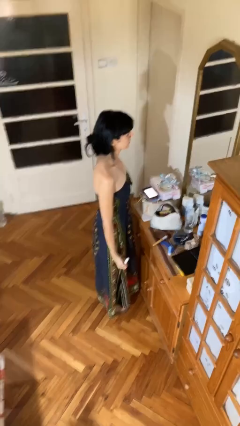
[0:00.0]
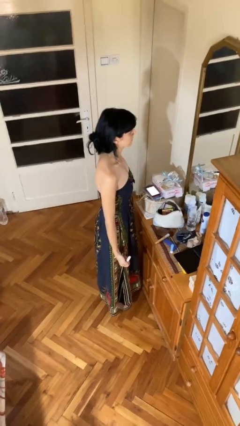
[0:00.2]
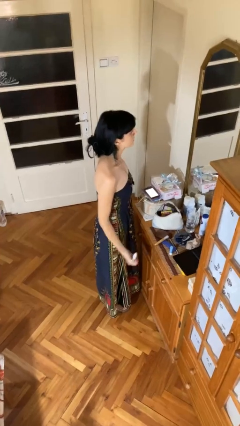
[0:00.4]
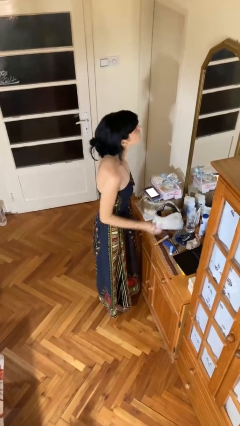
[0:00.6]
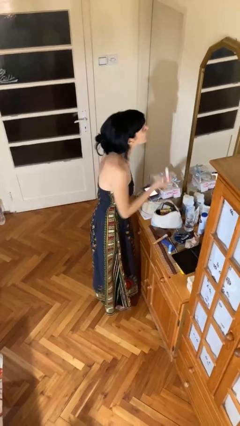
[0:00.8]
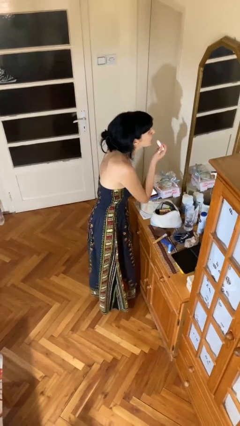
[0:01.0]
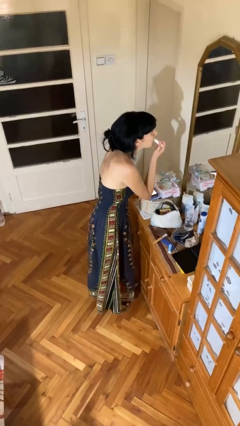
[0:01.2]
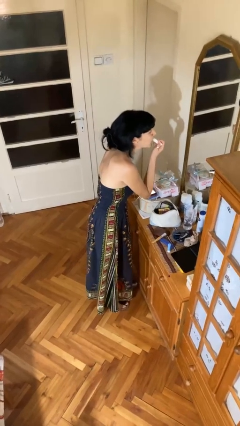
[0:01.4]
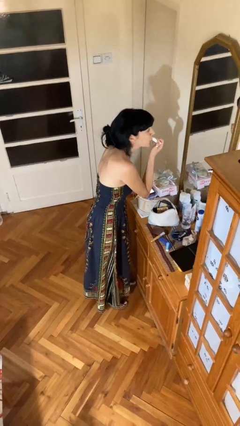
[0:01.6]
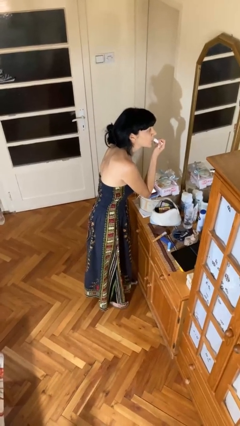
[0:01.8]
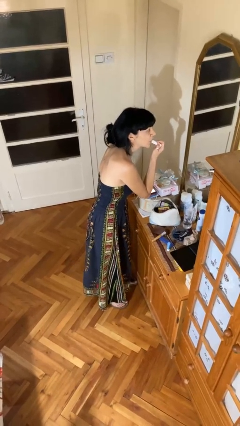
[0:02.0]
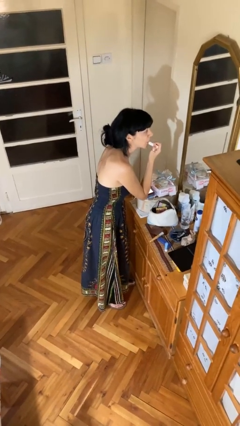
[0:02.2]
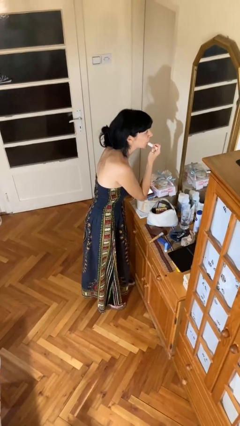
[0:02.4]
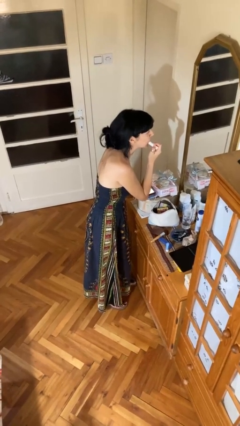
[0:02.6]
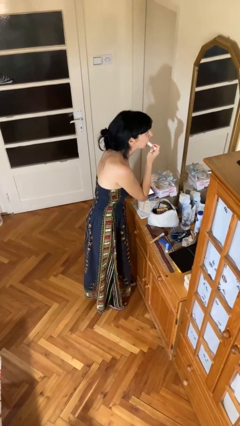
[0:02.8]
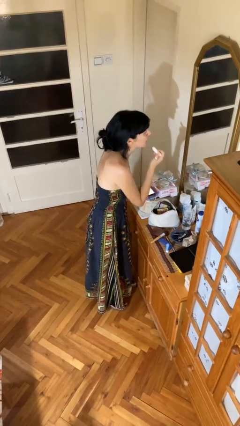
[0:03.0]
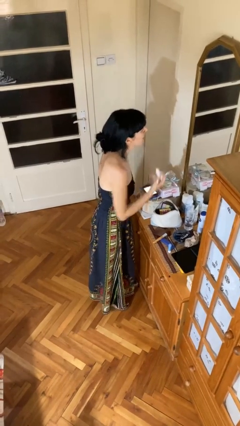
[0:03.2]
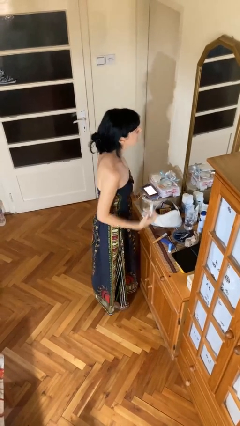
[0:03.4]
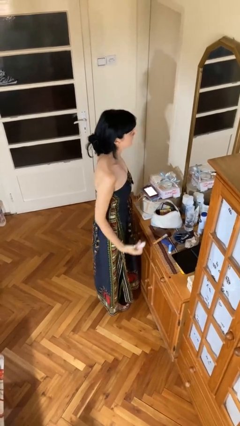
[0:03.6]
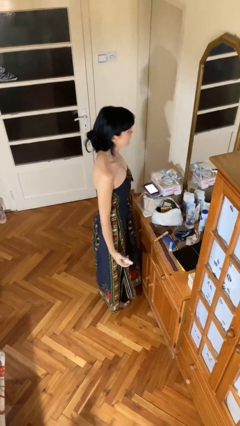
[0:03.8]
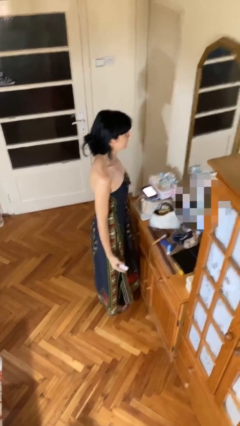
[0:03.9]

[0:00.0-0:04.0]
person applies lip makeup

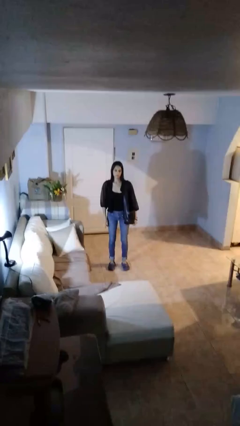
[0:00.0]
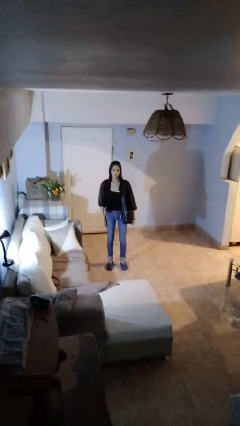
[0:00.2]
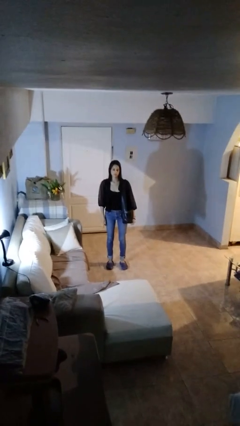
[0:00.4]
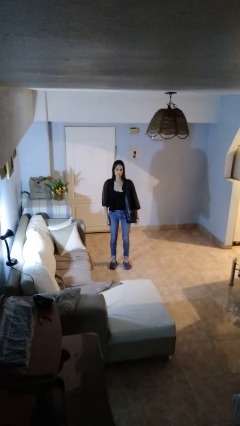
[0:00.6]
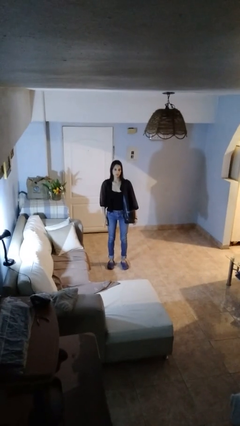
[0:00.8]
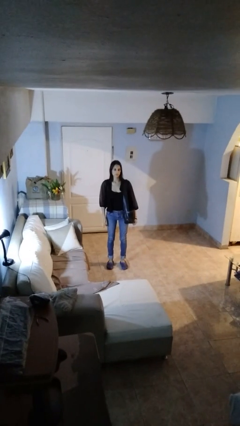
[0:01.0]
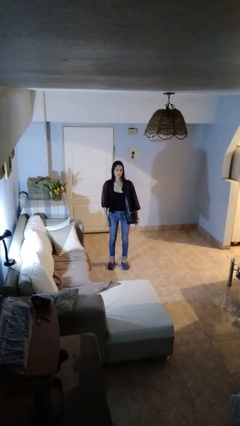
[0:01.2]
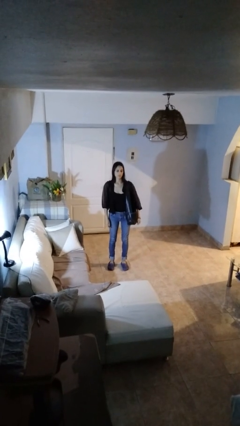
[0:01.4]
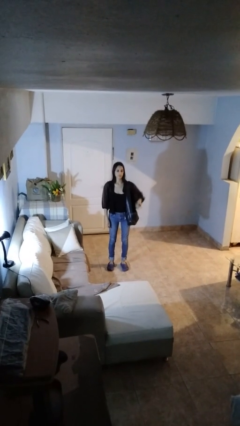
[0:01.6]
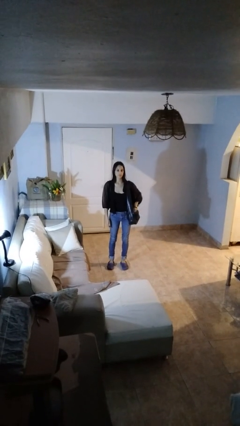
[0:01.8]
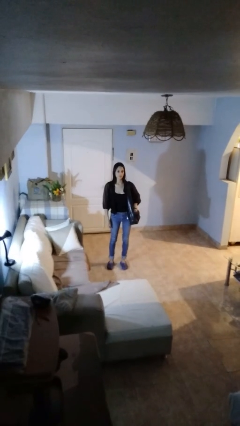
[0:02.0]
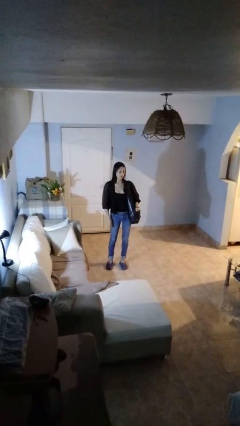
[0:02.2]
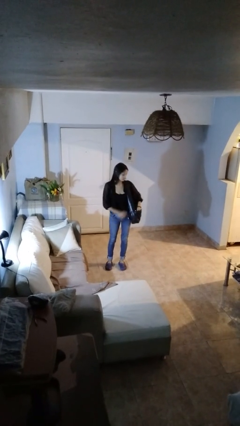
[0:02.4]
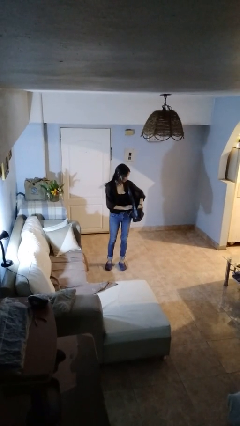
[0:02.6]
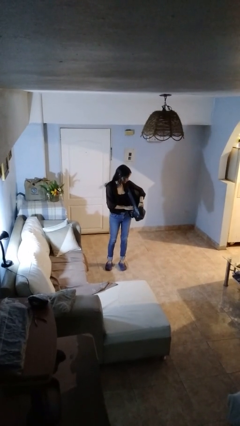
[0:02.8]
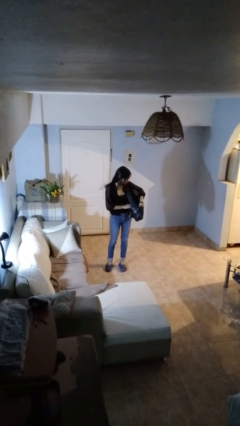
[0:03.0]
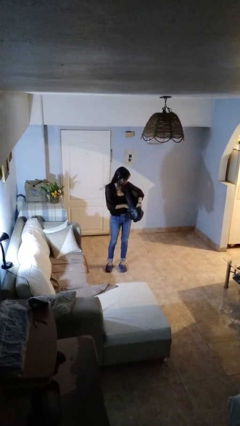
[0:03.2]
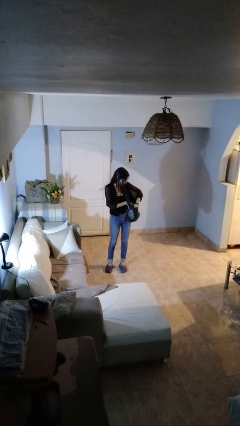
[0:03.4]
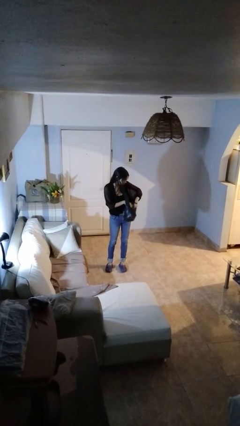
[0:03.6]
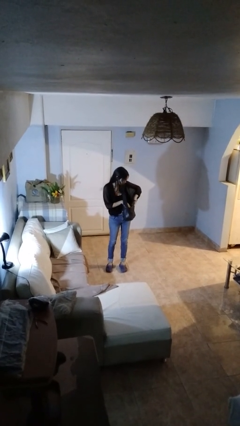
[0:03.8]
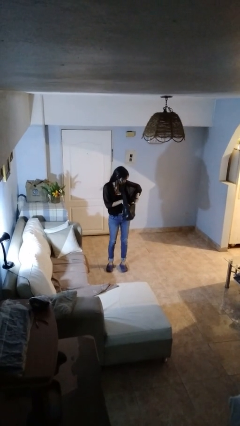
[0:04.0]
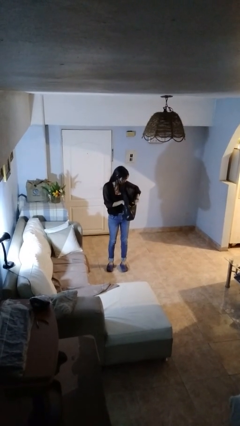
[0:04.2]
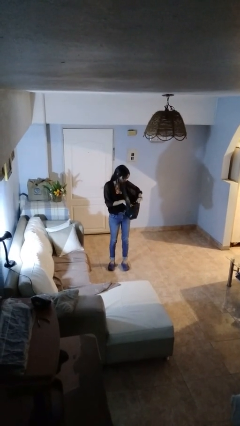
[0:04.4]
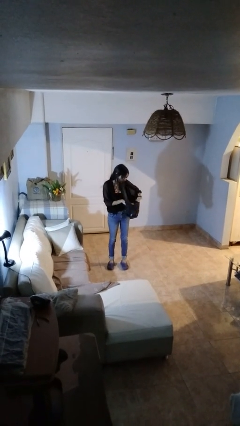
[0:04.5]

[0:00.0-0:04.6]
person searches in purse

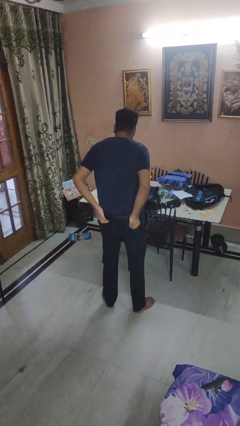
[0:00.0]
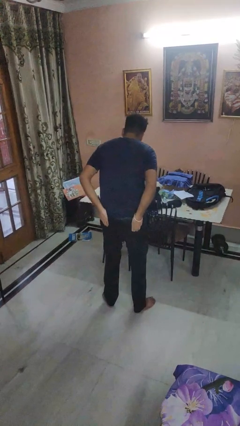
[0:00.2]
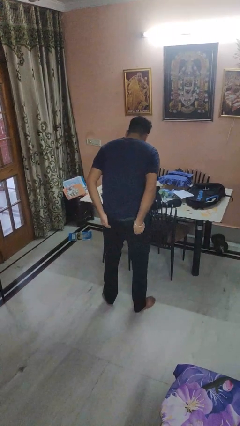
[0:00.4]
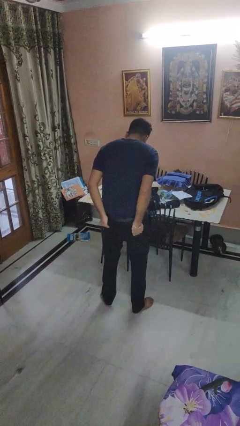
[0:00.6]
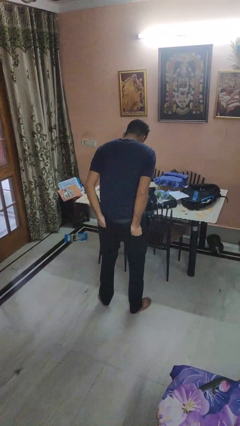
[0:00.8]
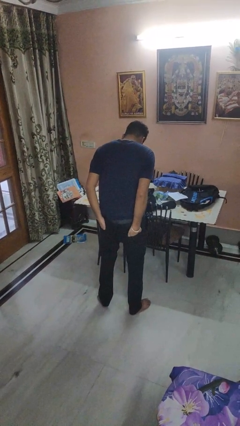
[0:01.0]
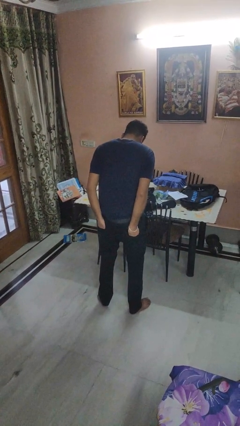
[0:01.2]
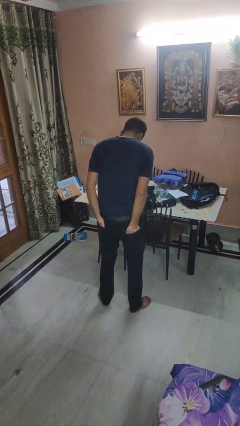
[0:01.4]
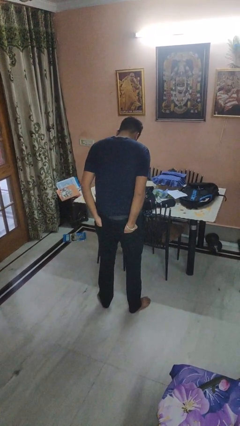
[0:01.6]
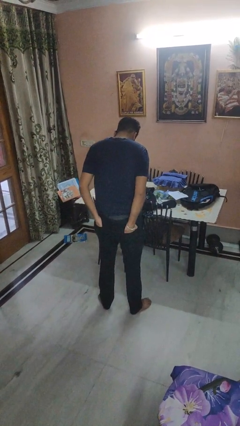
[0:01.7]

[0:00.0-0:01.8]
person puts hands in back pockets

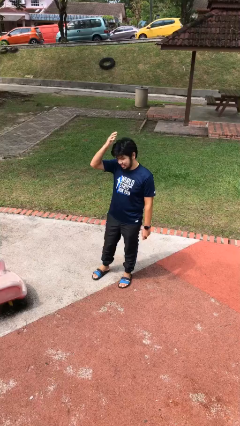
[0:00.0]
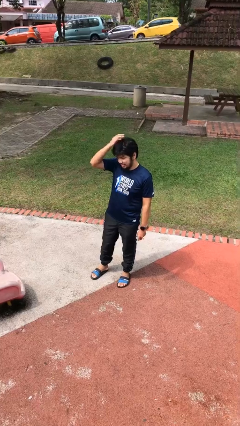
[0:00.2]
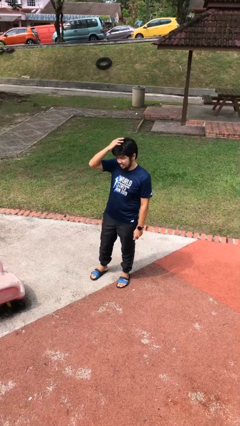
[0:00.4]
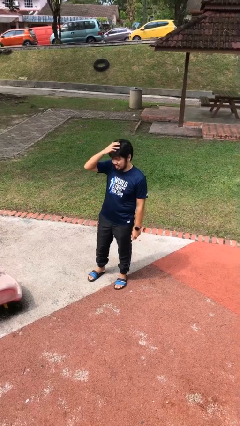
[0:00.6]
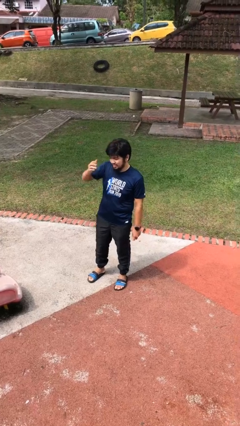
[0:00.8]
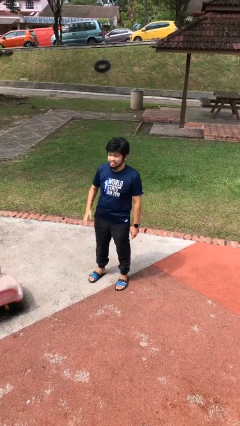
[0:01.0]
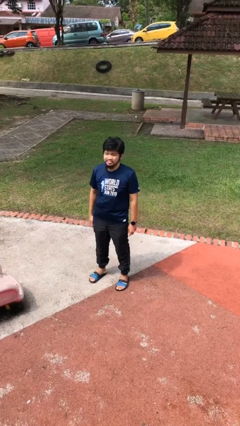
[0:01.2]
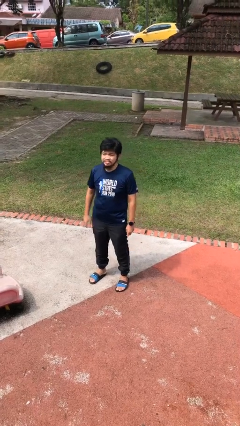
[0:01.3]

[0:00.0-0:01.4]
person pats head

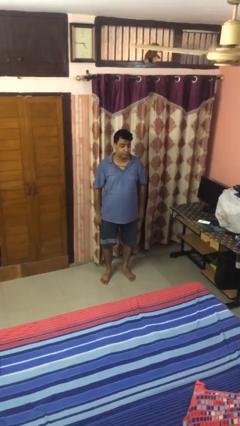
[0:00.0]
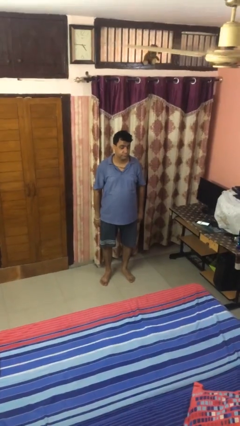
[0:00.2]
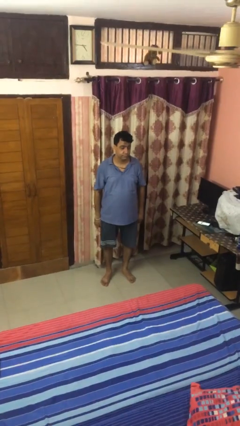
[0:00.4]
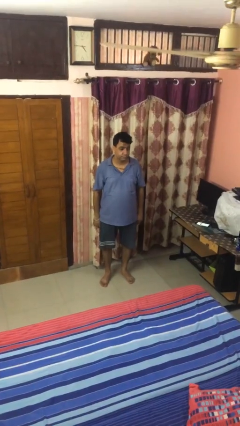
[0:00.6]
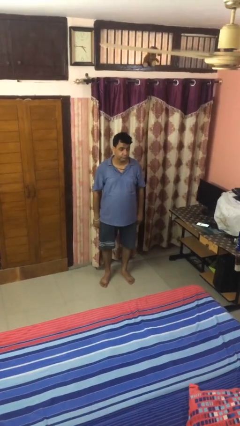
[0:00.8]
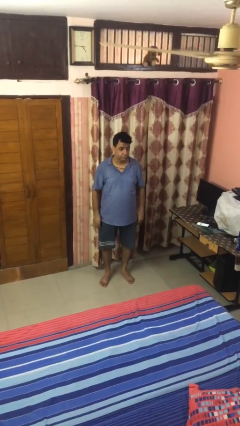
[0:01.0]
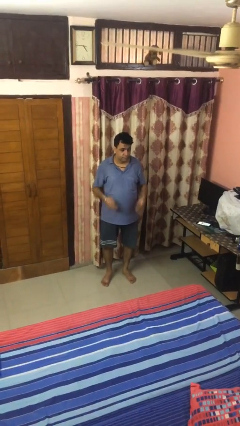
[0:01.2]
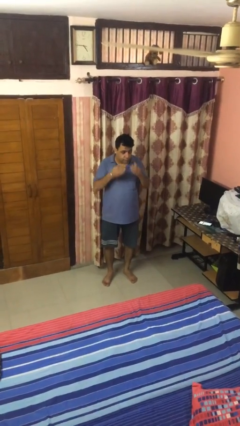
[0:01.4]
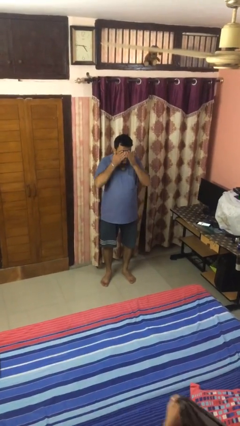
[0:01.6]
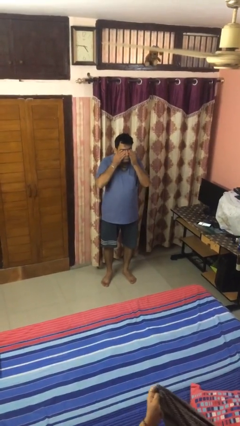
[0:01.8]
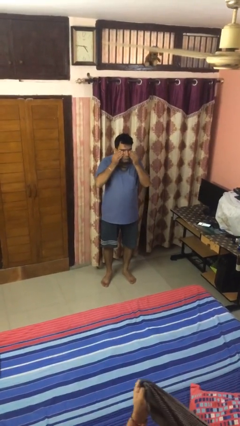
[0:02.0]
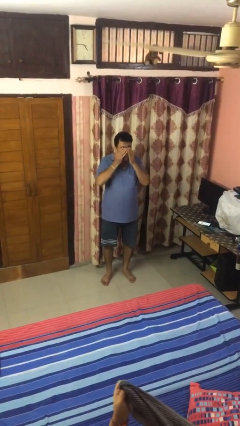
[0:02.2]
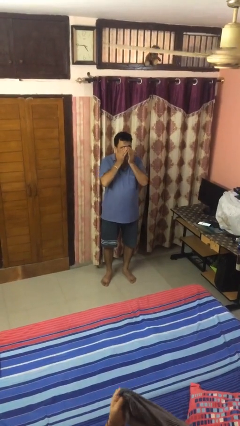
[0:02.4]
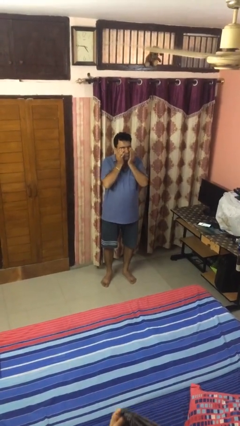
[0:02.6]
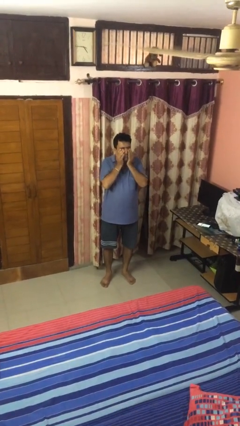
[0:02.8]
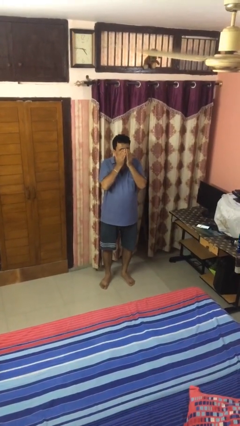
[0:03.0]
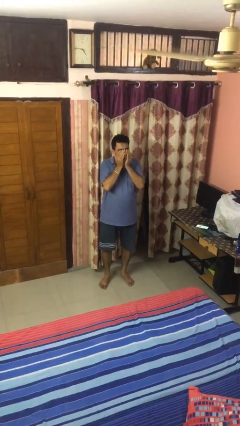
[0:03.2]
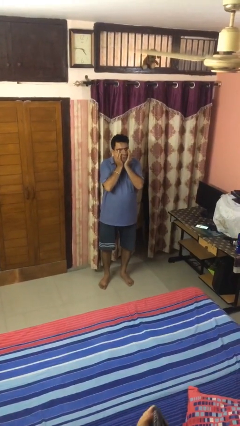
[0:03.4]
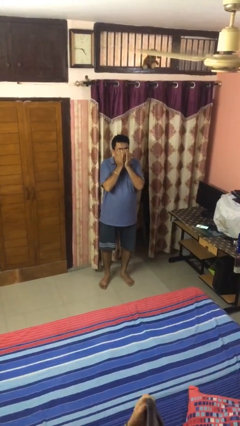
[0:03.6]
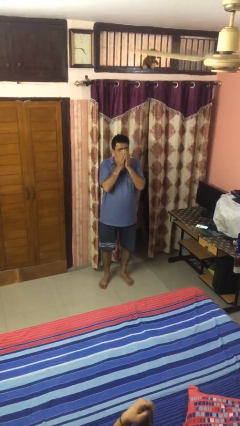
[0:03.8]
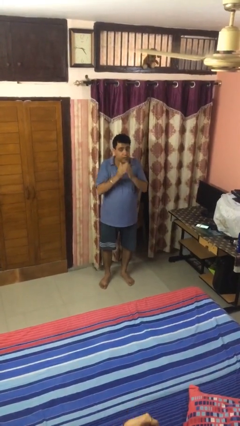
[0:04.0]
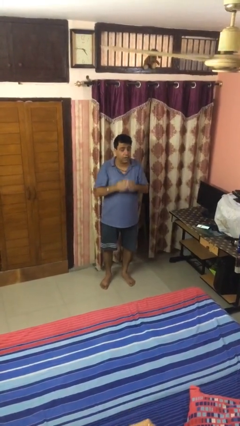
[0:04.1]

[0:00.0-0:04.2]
person rubs eyes

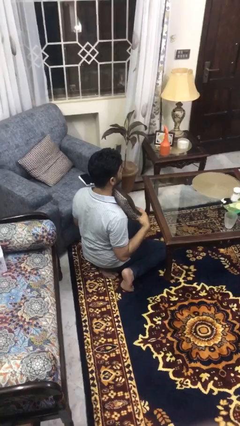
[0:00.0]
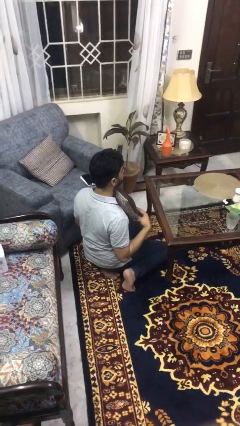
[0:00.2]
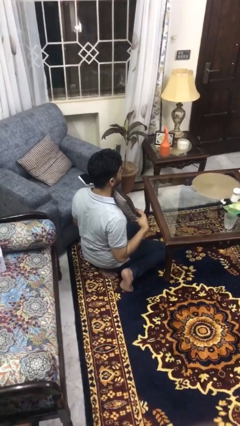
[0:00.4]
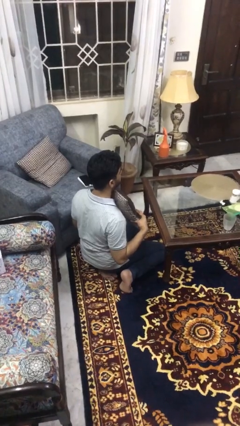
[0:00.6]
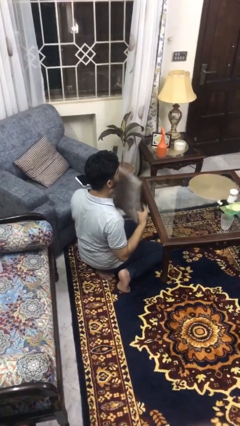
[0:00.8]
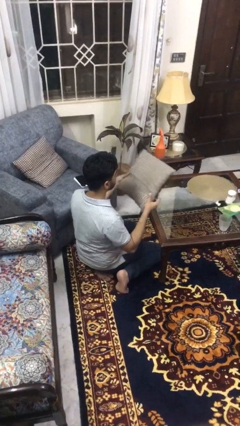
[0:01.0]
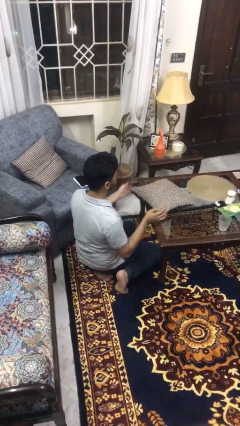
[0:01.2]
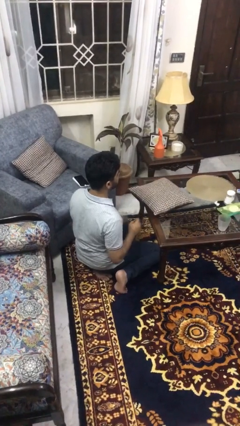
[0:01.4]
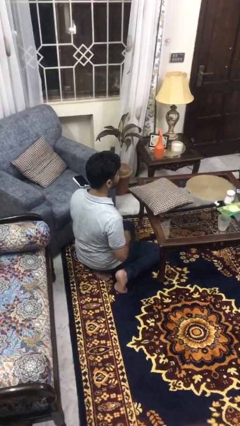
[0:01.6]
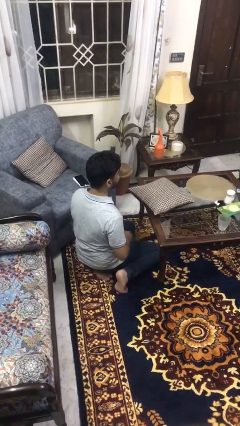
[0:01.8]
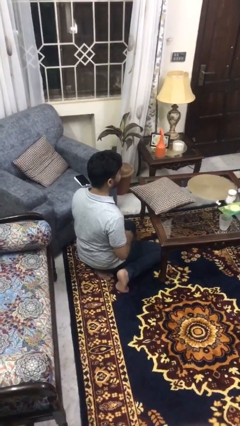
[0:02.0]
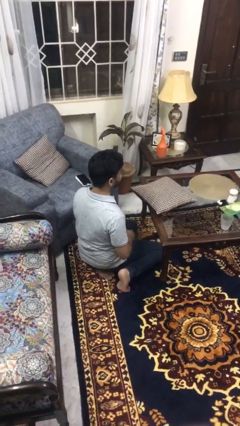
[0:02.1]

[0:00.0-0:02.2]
person throws object on table
